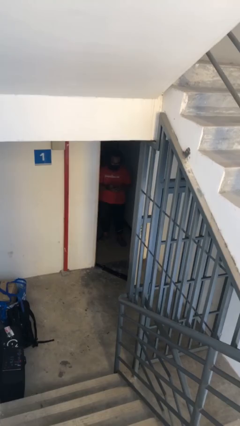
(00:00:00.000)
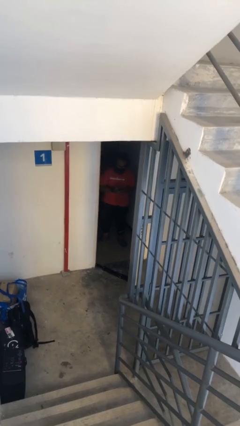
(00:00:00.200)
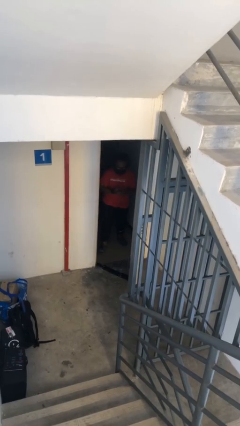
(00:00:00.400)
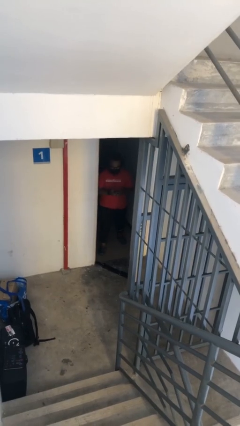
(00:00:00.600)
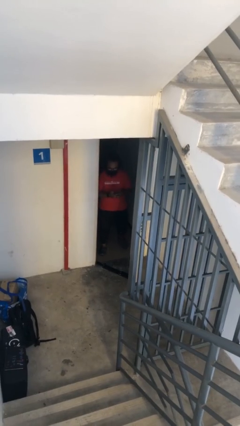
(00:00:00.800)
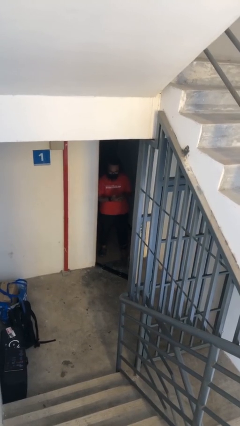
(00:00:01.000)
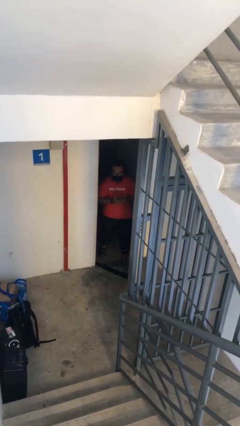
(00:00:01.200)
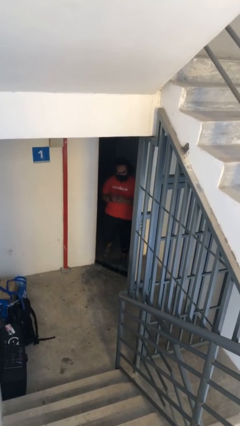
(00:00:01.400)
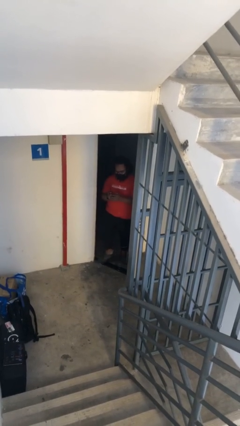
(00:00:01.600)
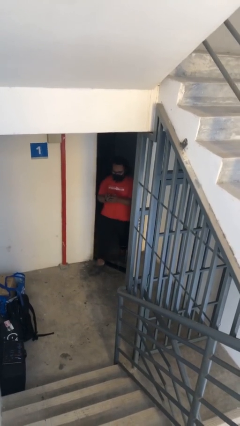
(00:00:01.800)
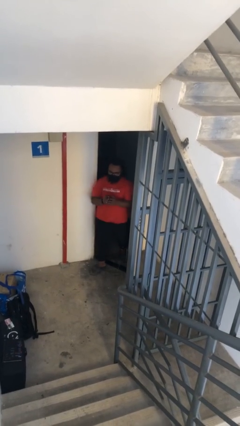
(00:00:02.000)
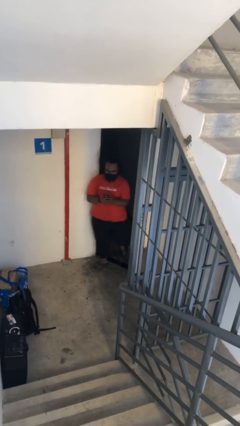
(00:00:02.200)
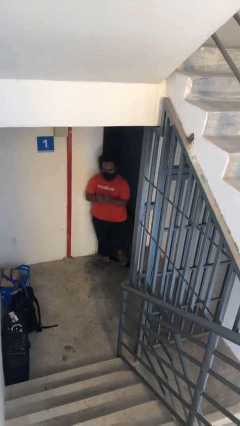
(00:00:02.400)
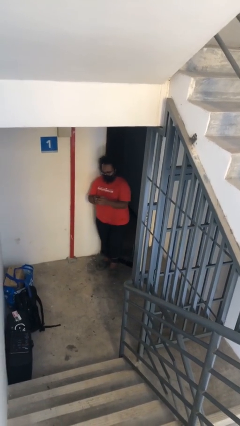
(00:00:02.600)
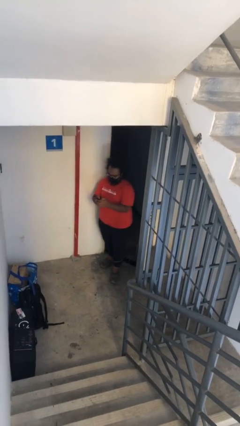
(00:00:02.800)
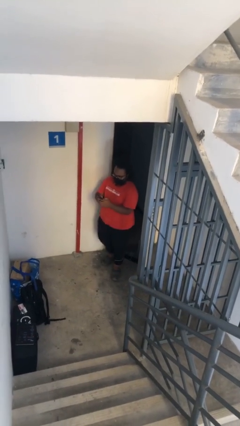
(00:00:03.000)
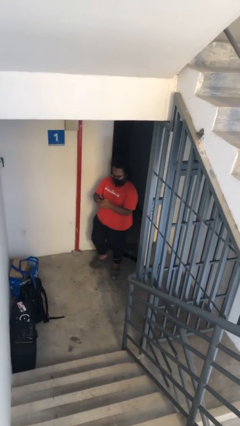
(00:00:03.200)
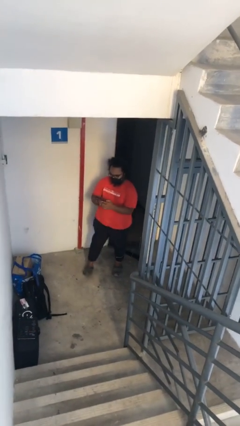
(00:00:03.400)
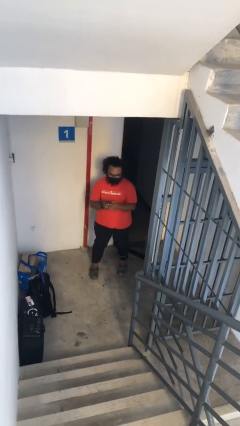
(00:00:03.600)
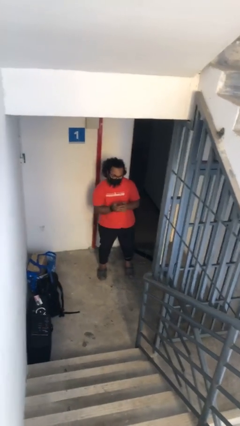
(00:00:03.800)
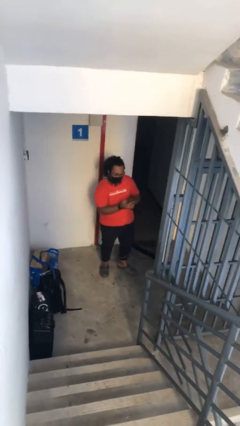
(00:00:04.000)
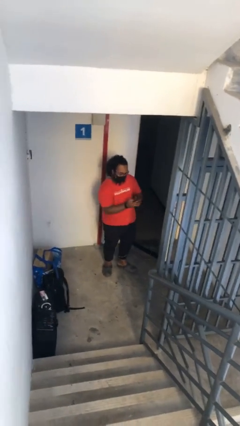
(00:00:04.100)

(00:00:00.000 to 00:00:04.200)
person enters scene through structure

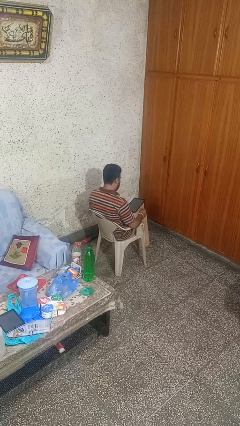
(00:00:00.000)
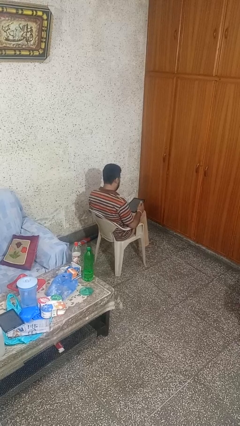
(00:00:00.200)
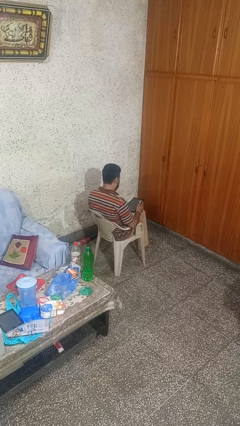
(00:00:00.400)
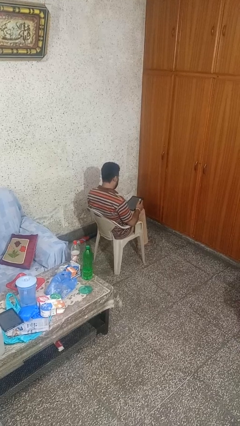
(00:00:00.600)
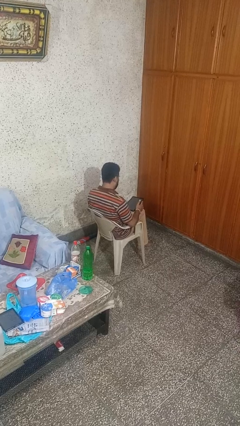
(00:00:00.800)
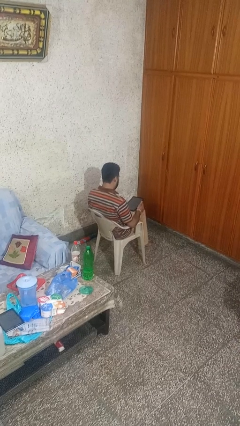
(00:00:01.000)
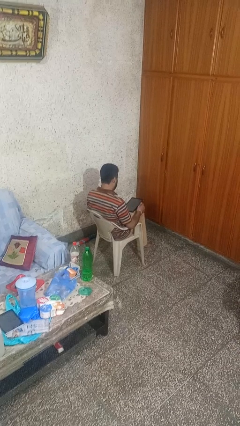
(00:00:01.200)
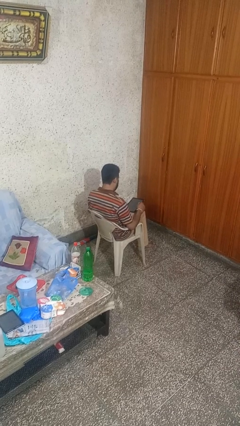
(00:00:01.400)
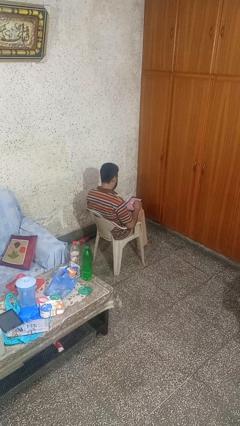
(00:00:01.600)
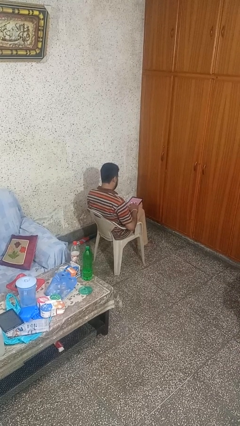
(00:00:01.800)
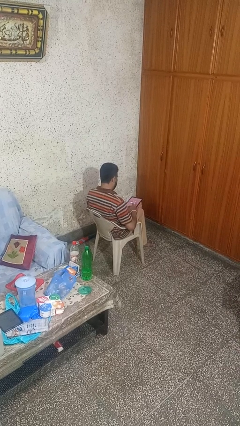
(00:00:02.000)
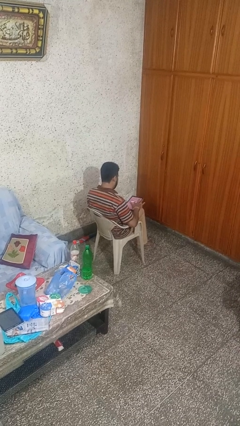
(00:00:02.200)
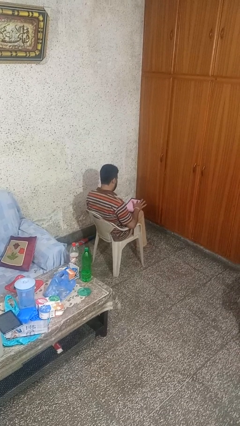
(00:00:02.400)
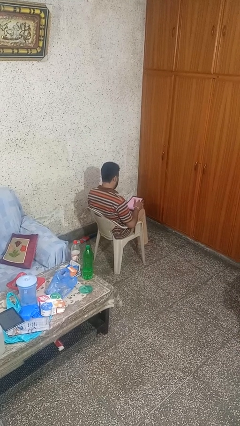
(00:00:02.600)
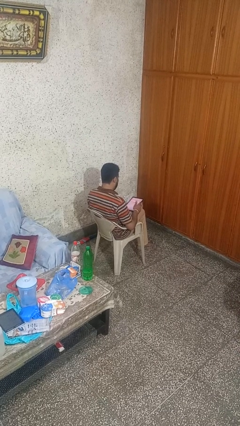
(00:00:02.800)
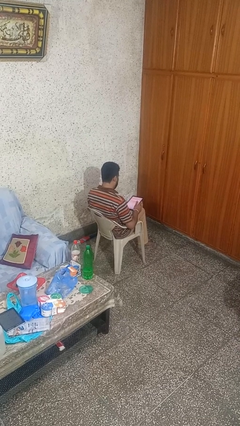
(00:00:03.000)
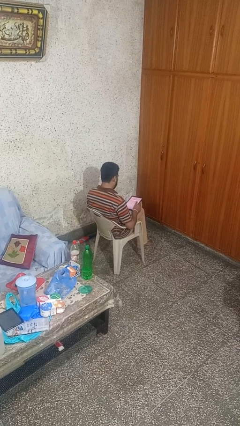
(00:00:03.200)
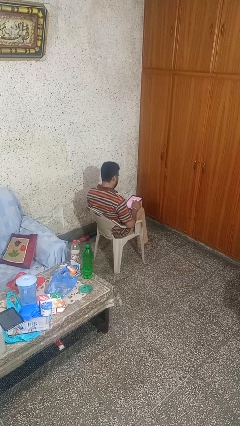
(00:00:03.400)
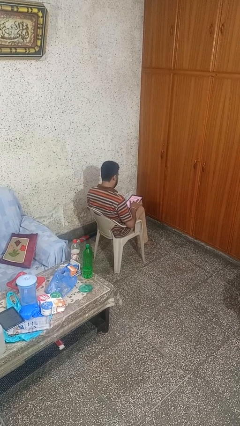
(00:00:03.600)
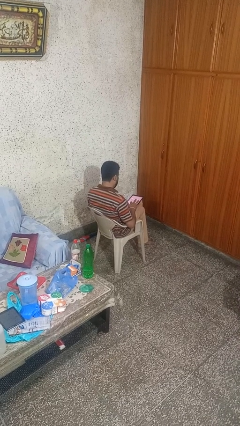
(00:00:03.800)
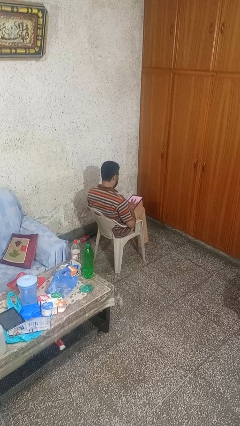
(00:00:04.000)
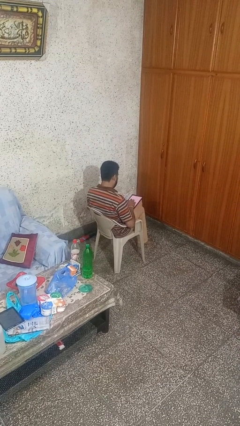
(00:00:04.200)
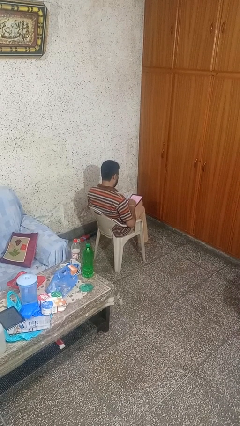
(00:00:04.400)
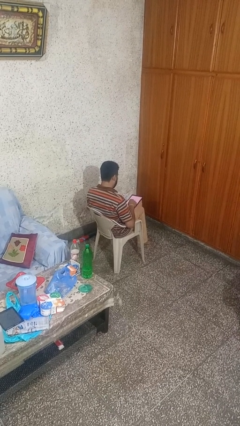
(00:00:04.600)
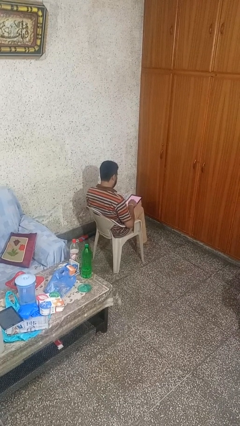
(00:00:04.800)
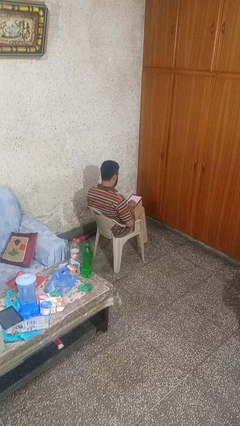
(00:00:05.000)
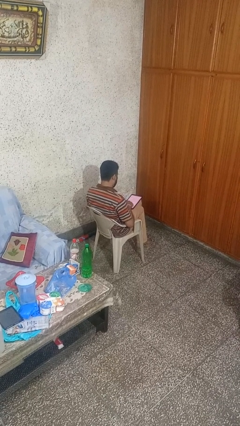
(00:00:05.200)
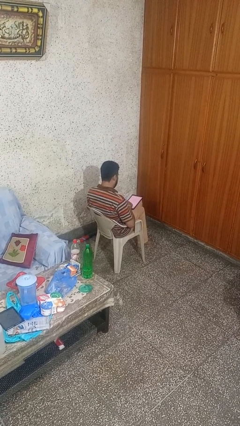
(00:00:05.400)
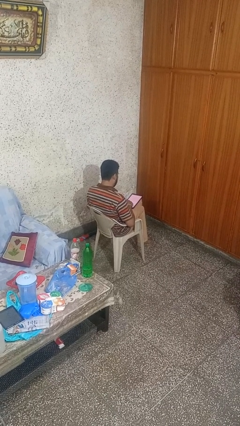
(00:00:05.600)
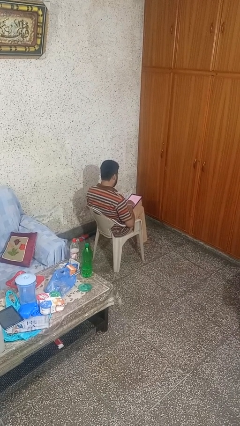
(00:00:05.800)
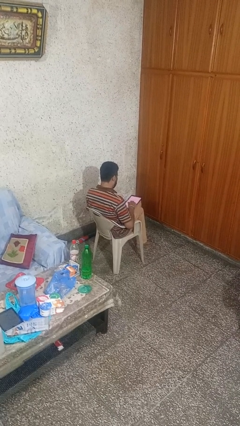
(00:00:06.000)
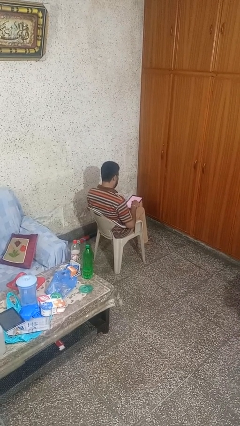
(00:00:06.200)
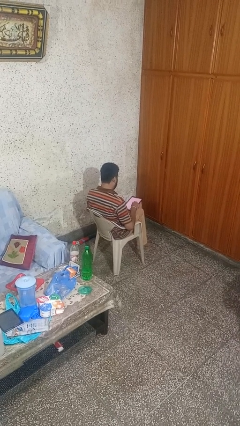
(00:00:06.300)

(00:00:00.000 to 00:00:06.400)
person interacts with tablet

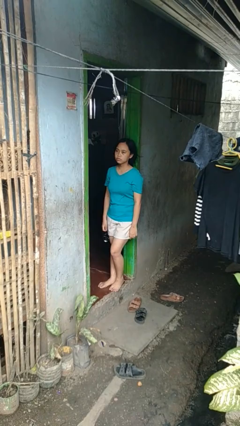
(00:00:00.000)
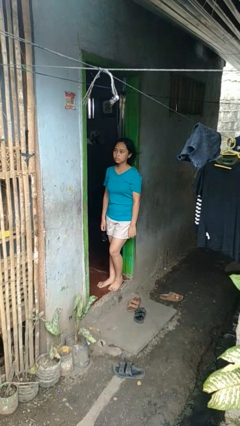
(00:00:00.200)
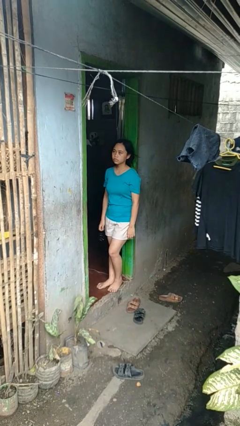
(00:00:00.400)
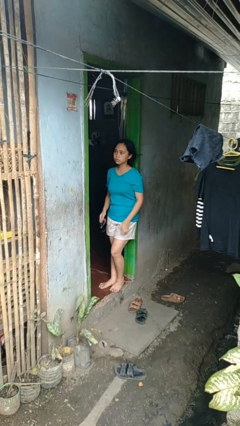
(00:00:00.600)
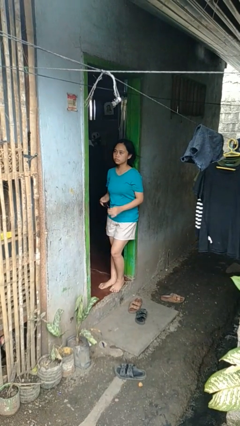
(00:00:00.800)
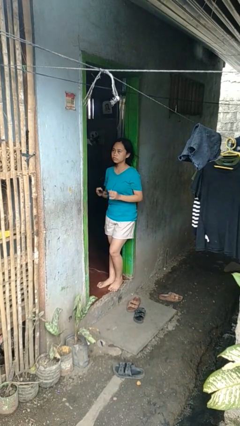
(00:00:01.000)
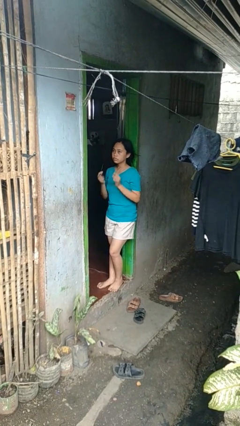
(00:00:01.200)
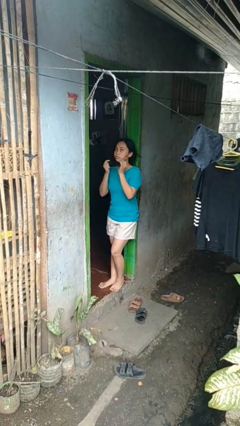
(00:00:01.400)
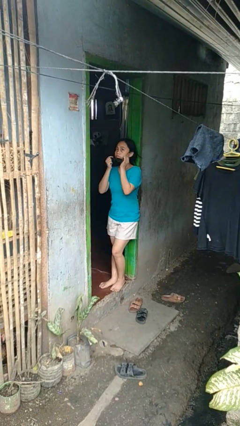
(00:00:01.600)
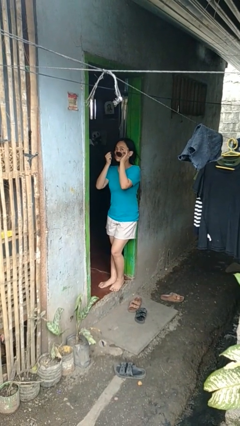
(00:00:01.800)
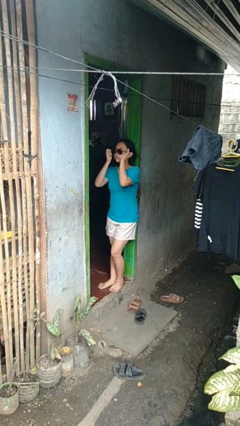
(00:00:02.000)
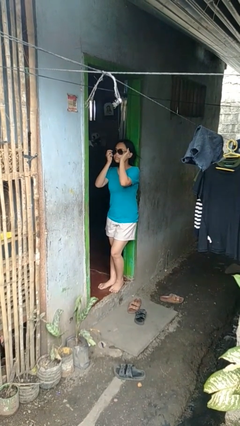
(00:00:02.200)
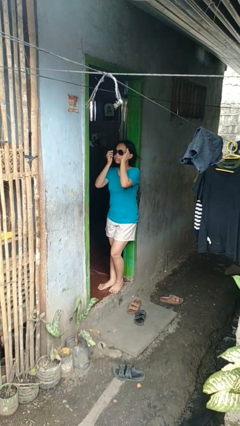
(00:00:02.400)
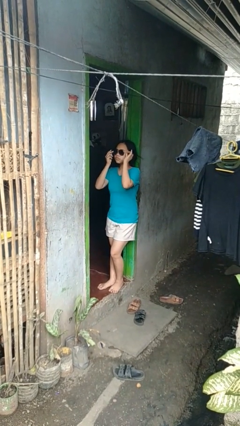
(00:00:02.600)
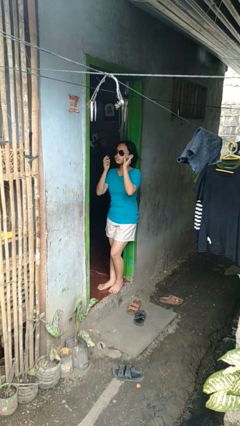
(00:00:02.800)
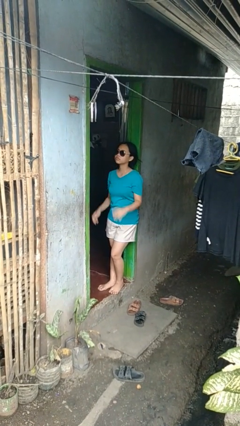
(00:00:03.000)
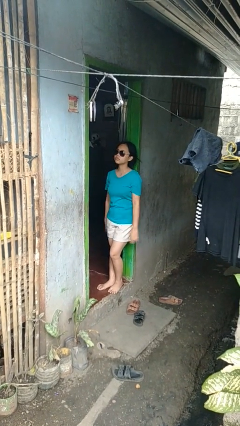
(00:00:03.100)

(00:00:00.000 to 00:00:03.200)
person puts on sunglasses

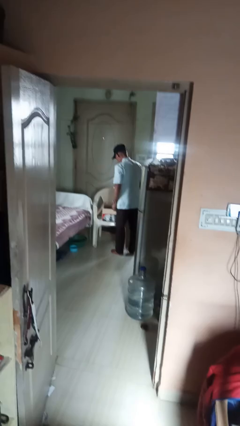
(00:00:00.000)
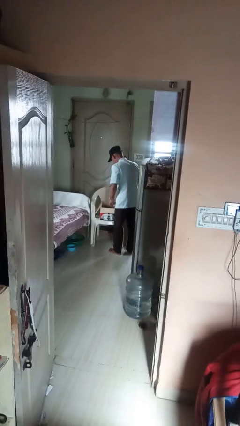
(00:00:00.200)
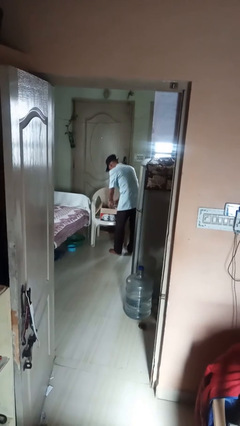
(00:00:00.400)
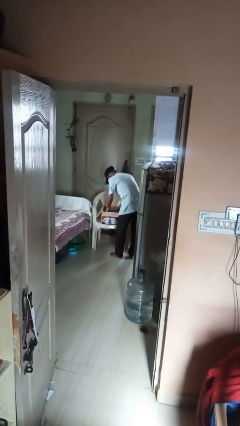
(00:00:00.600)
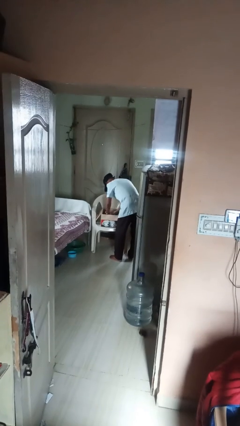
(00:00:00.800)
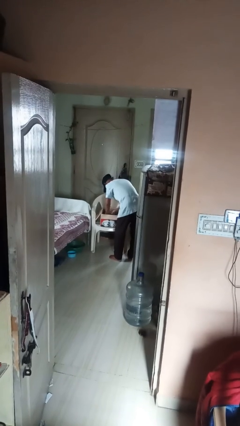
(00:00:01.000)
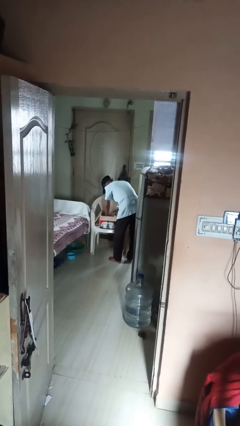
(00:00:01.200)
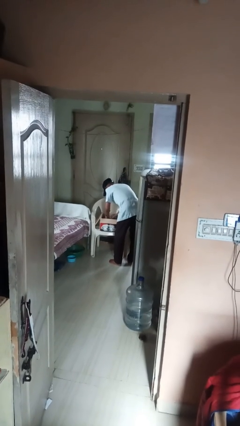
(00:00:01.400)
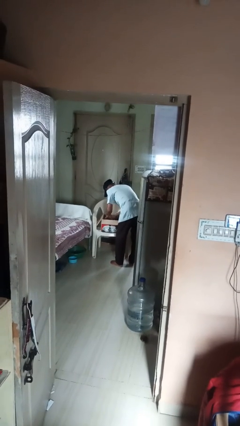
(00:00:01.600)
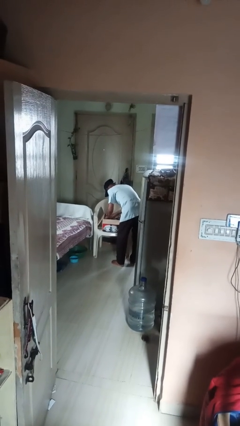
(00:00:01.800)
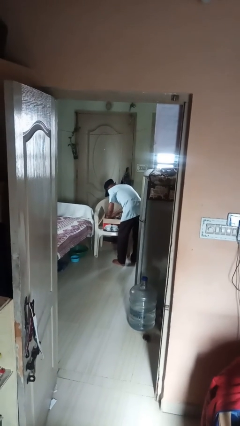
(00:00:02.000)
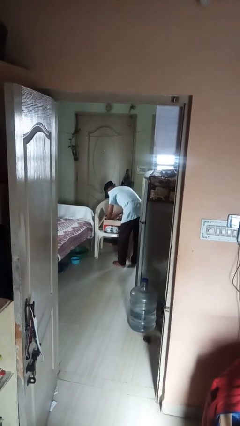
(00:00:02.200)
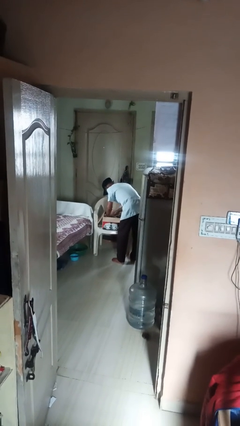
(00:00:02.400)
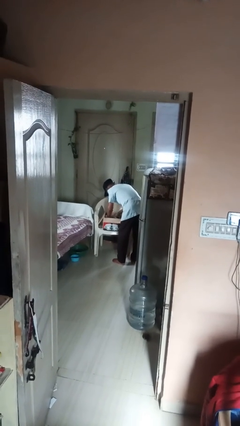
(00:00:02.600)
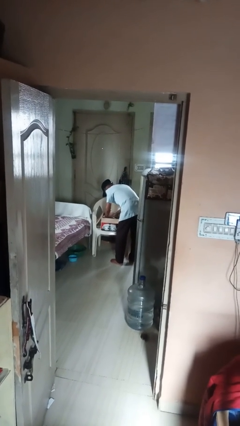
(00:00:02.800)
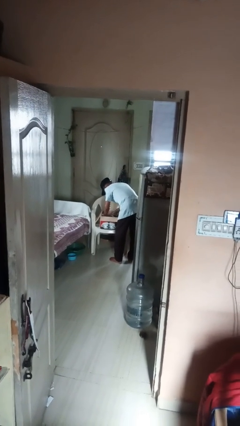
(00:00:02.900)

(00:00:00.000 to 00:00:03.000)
person searches in box

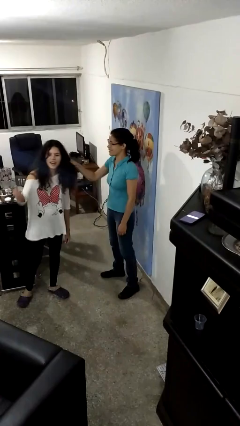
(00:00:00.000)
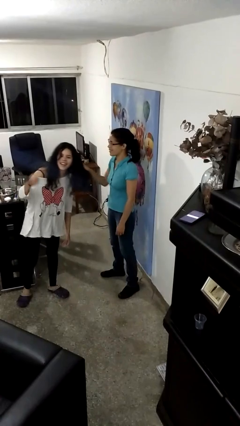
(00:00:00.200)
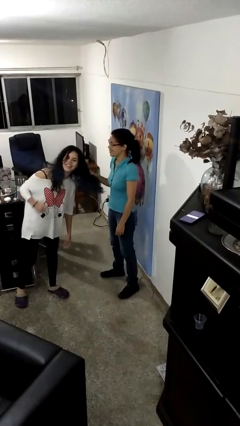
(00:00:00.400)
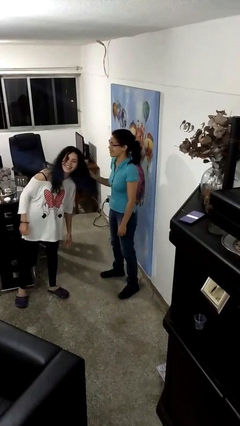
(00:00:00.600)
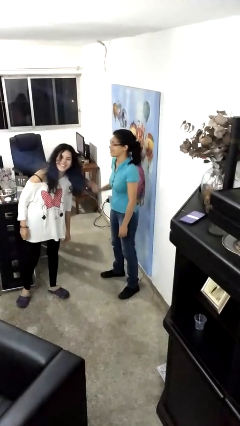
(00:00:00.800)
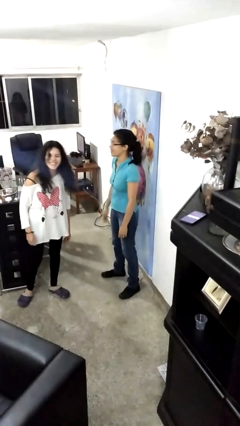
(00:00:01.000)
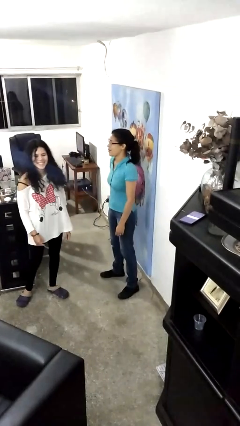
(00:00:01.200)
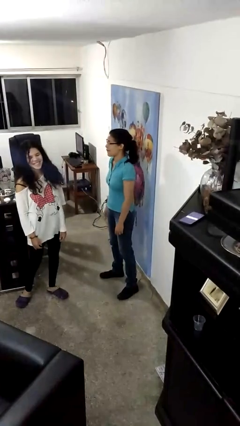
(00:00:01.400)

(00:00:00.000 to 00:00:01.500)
person grabs person by hair
